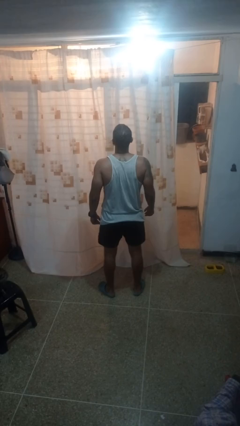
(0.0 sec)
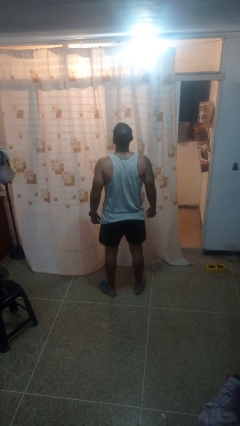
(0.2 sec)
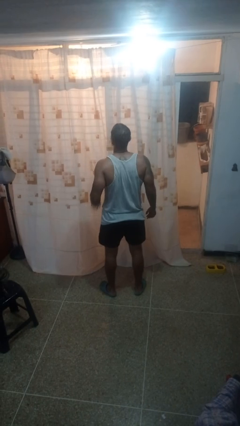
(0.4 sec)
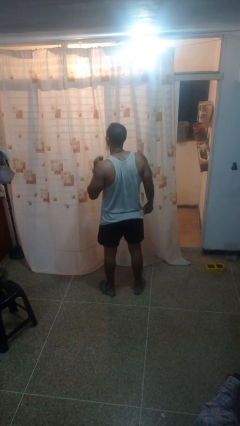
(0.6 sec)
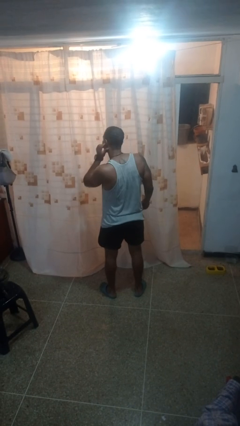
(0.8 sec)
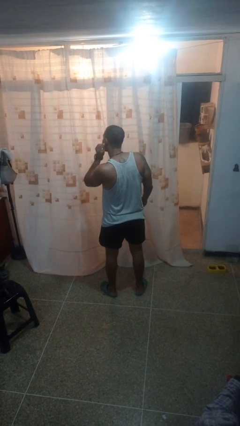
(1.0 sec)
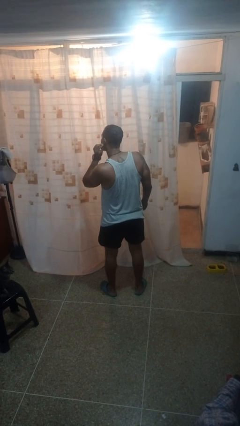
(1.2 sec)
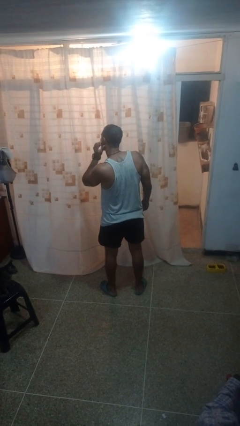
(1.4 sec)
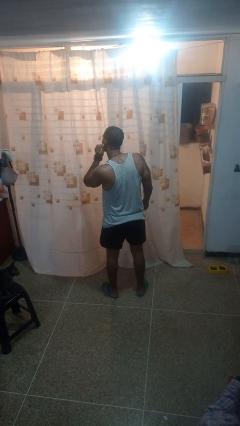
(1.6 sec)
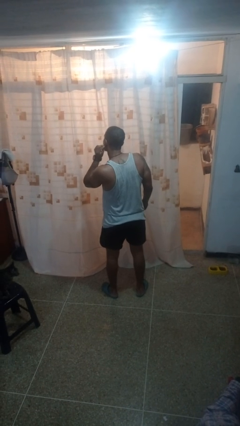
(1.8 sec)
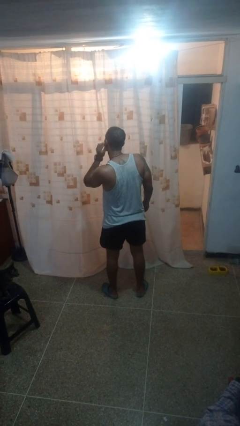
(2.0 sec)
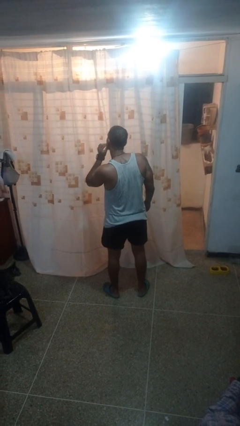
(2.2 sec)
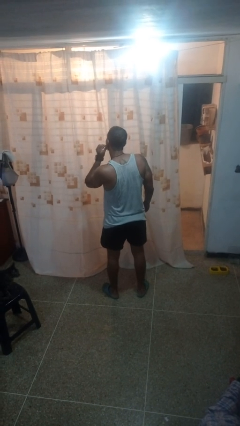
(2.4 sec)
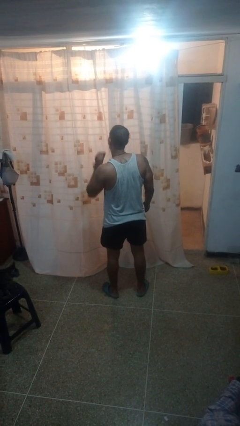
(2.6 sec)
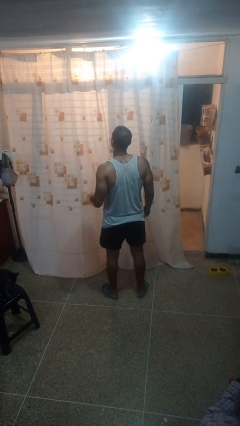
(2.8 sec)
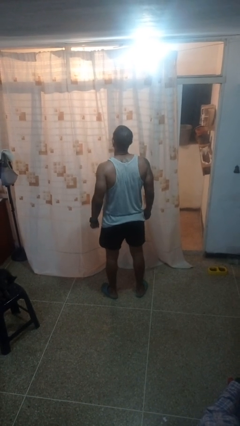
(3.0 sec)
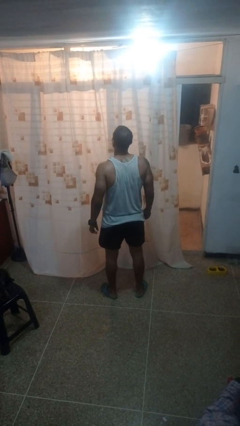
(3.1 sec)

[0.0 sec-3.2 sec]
person touches earlobe

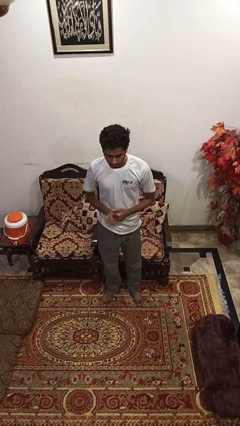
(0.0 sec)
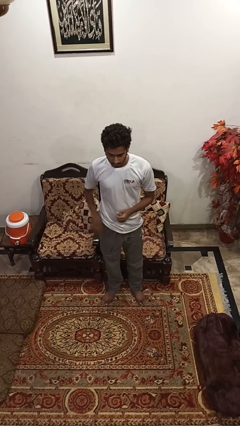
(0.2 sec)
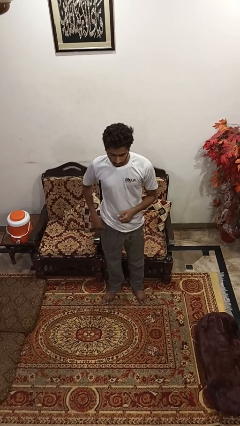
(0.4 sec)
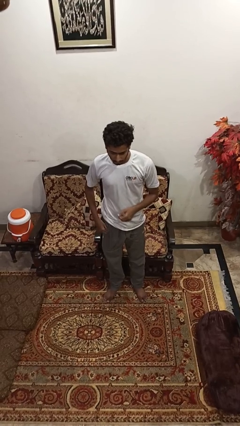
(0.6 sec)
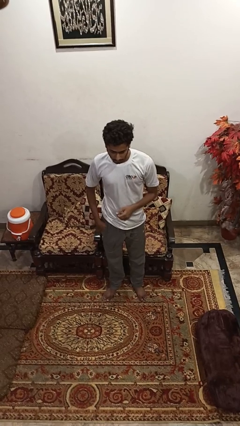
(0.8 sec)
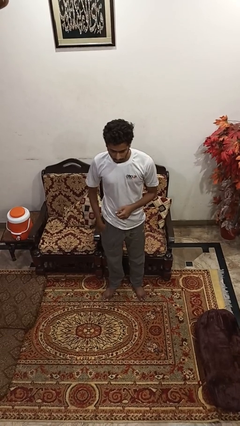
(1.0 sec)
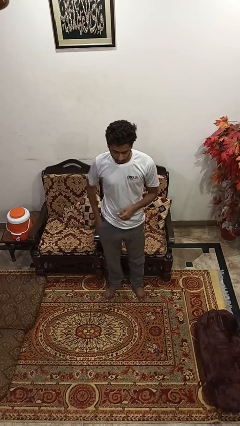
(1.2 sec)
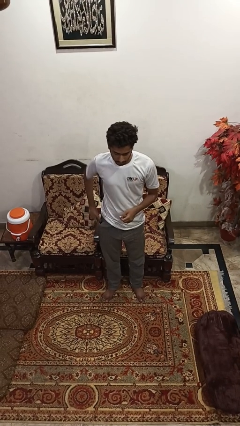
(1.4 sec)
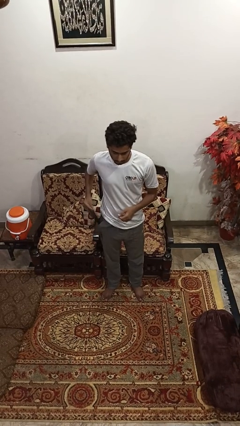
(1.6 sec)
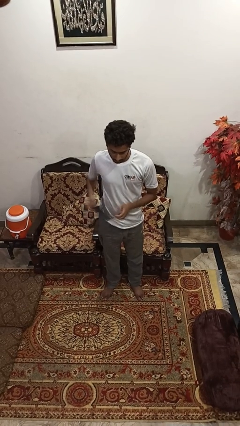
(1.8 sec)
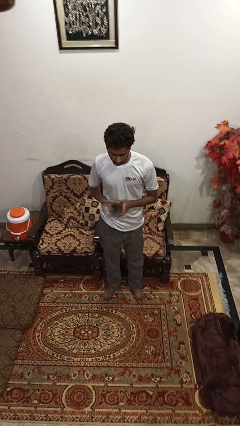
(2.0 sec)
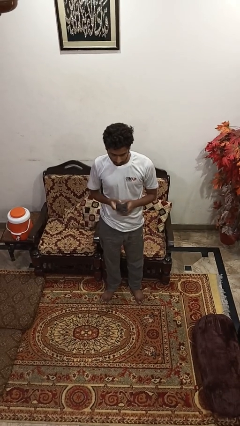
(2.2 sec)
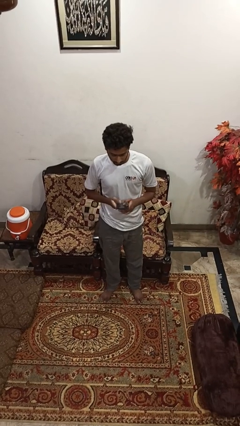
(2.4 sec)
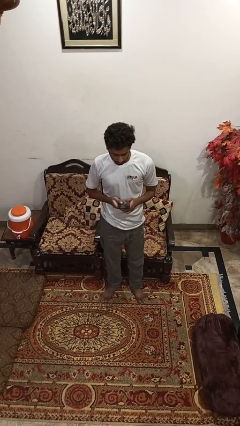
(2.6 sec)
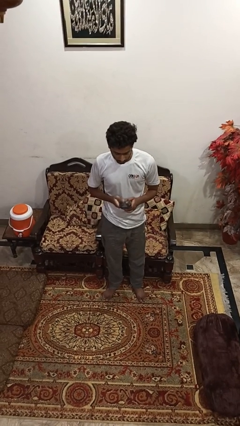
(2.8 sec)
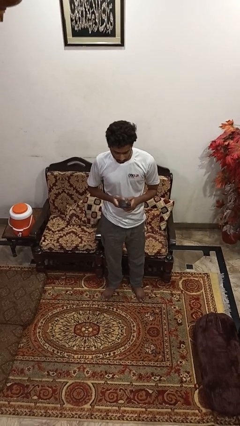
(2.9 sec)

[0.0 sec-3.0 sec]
person takes phone from pocket

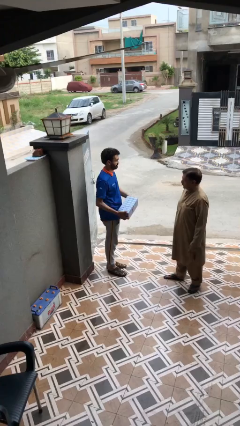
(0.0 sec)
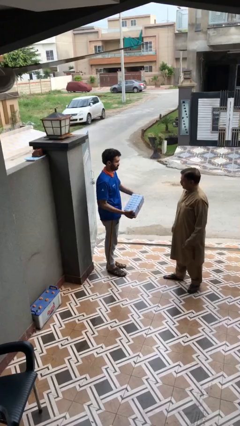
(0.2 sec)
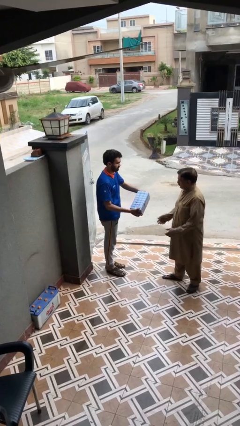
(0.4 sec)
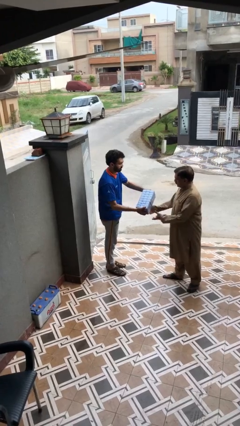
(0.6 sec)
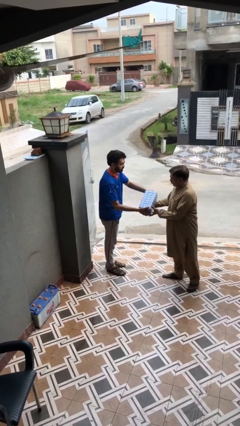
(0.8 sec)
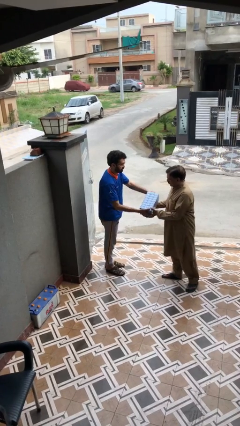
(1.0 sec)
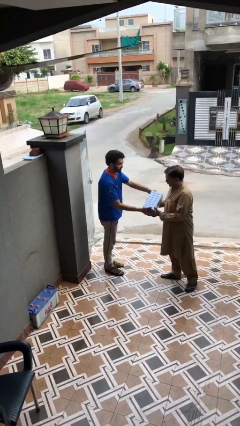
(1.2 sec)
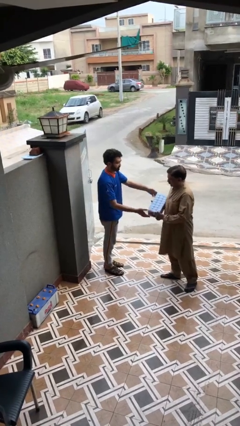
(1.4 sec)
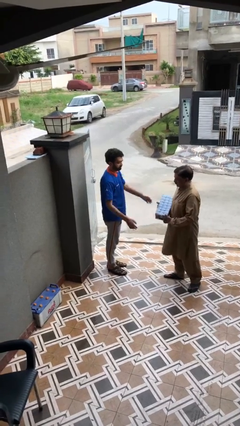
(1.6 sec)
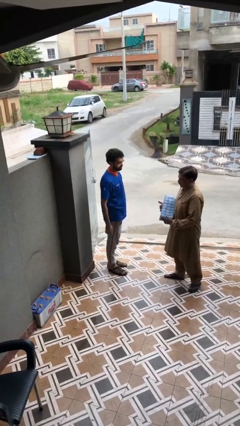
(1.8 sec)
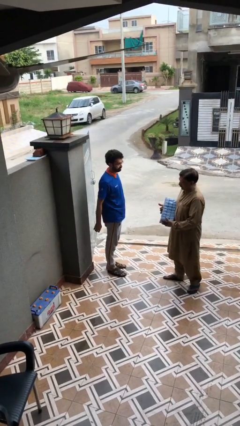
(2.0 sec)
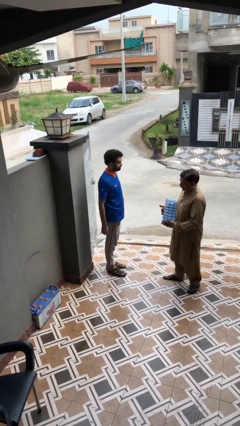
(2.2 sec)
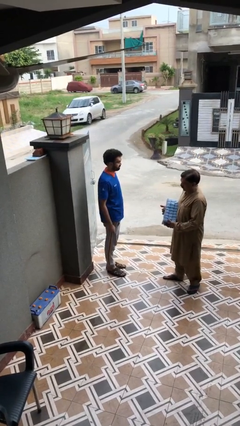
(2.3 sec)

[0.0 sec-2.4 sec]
person transfers object to person

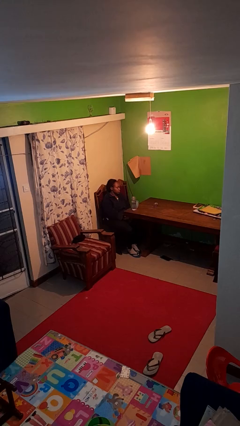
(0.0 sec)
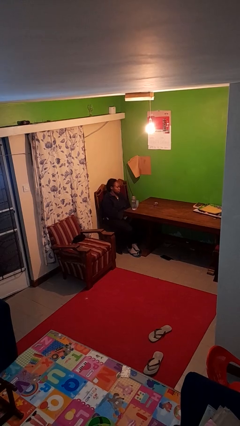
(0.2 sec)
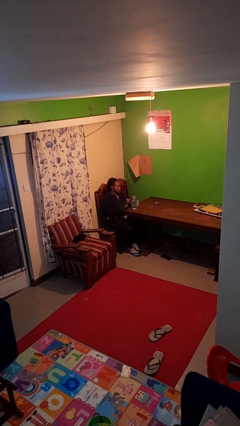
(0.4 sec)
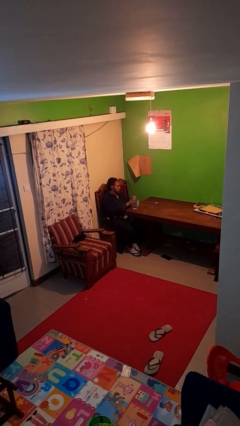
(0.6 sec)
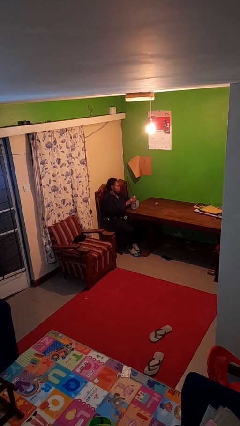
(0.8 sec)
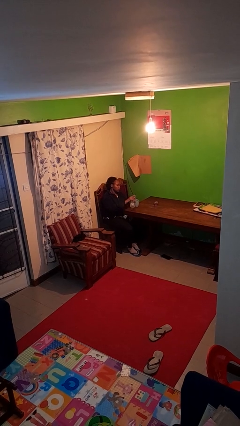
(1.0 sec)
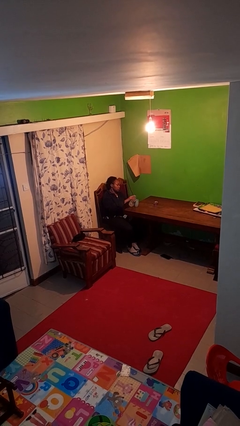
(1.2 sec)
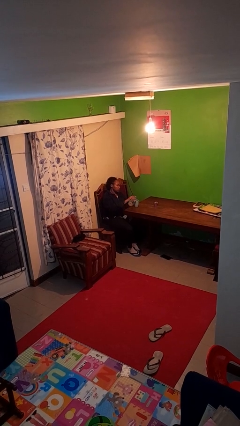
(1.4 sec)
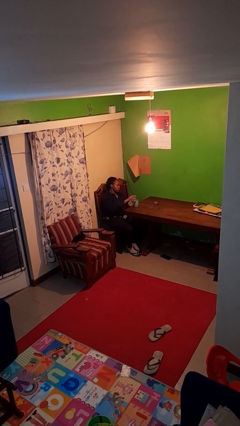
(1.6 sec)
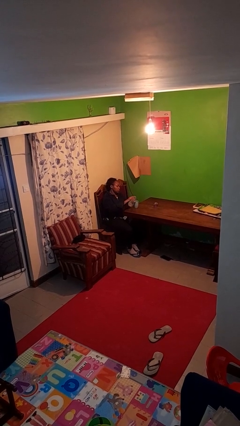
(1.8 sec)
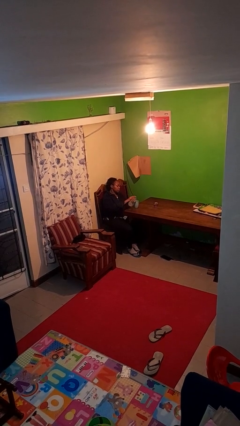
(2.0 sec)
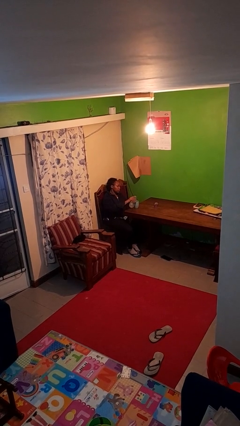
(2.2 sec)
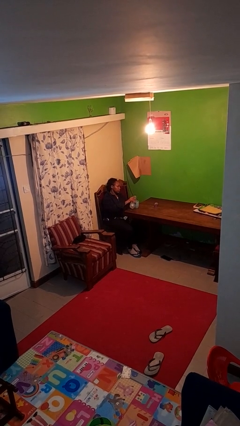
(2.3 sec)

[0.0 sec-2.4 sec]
person pours liquid into cup

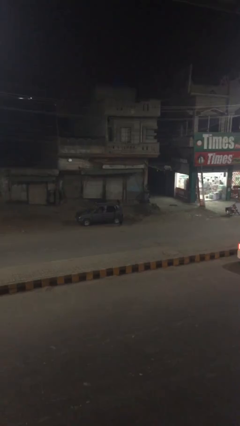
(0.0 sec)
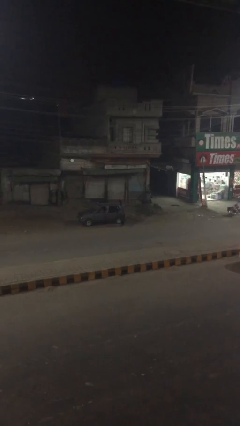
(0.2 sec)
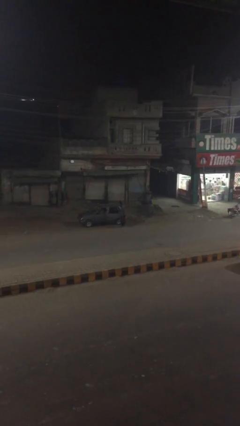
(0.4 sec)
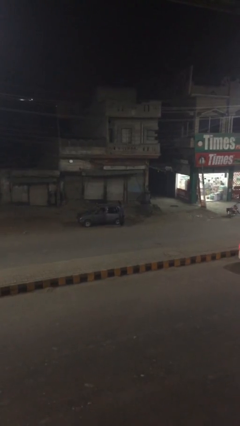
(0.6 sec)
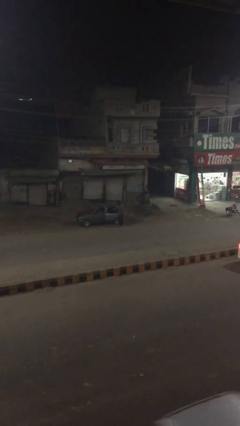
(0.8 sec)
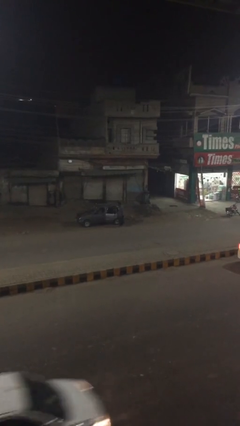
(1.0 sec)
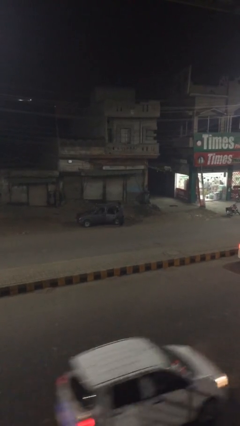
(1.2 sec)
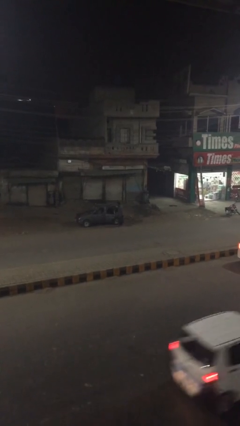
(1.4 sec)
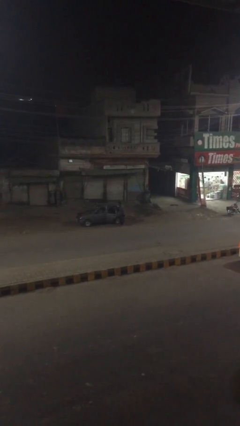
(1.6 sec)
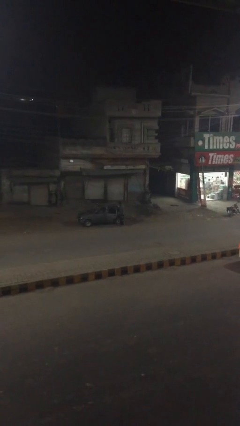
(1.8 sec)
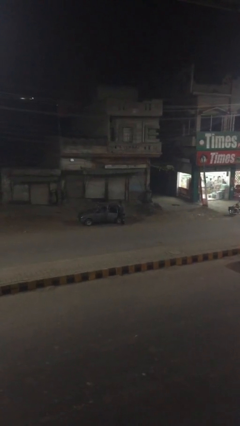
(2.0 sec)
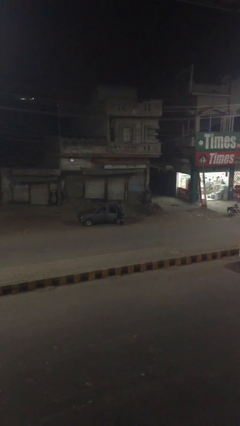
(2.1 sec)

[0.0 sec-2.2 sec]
person opens car door

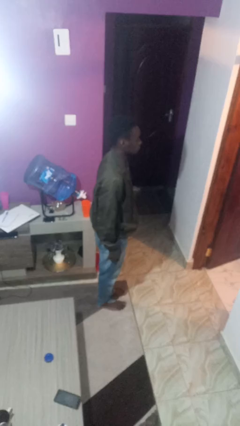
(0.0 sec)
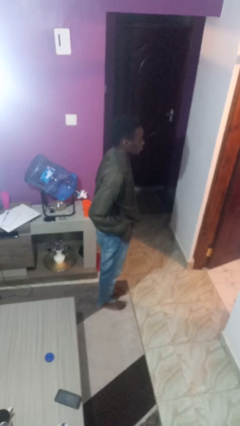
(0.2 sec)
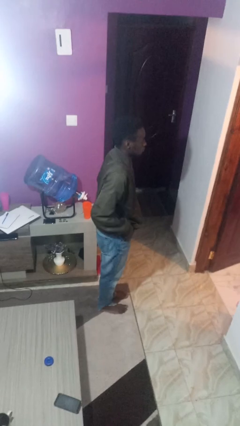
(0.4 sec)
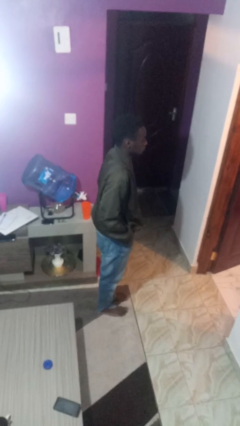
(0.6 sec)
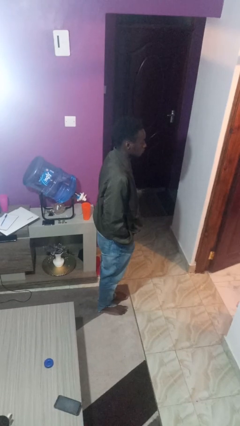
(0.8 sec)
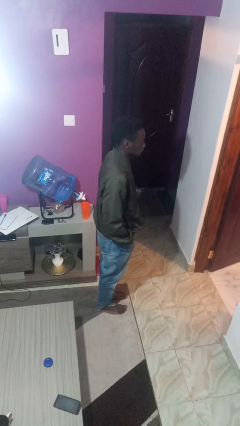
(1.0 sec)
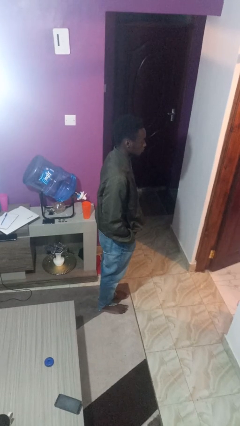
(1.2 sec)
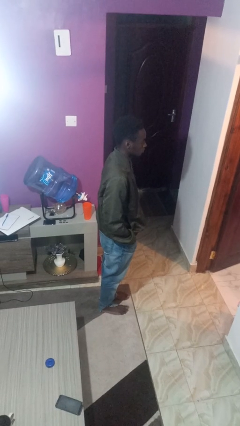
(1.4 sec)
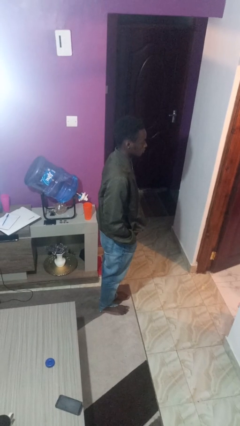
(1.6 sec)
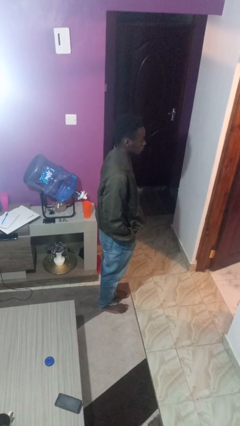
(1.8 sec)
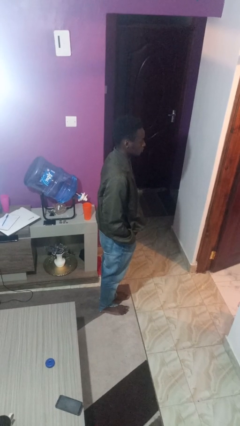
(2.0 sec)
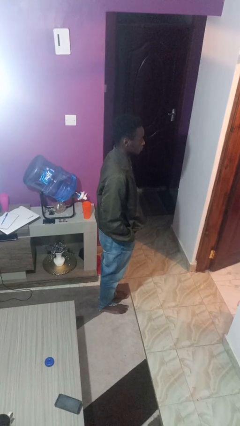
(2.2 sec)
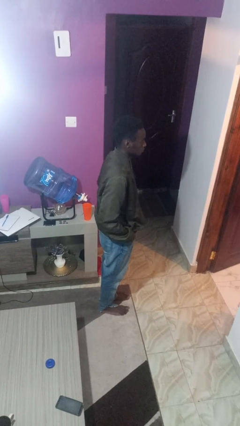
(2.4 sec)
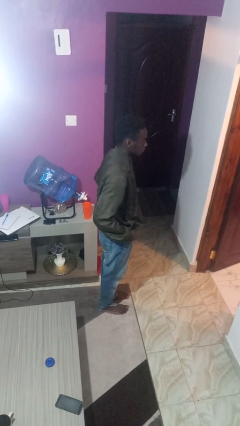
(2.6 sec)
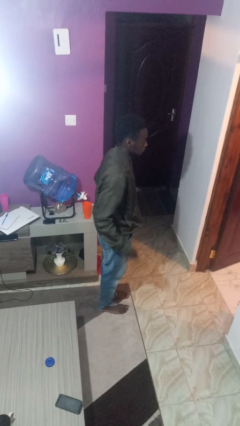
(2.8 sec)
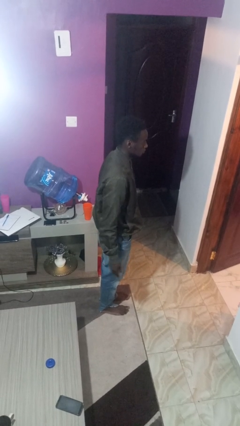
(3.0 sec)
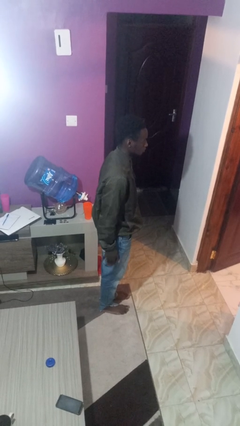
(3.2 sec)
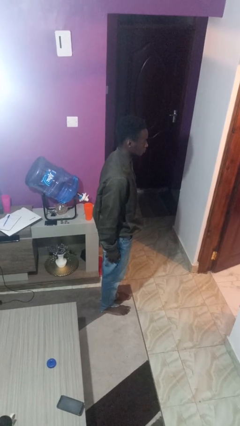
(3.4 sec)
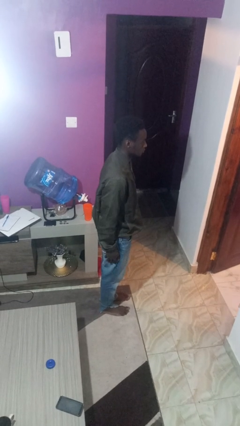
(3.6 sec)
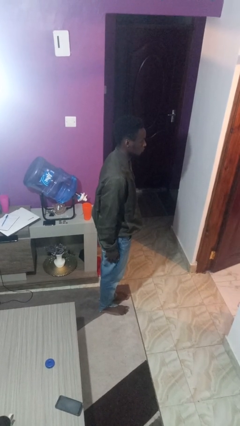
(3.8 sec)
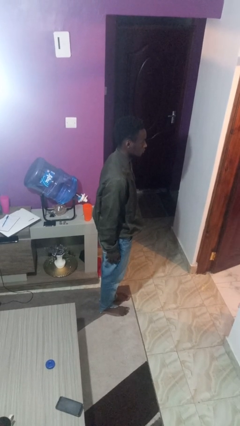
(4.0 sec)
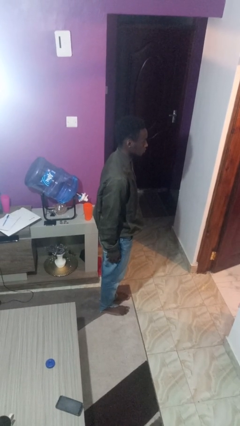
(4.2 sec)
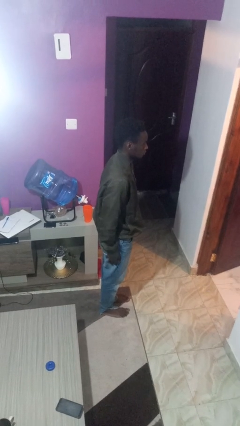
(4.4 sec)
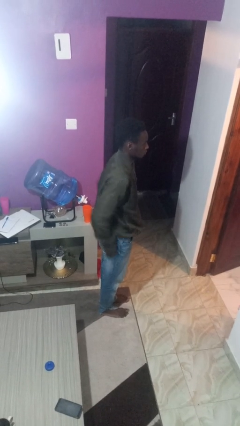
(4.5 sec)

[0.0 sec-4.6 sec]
person puts hands in back pockets
